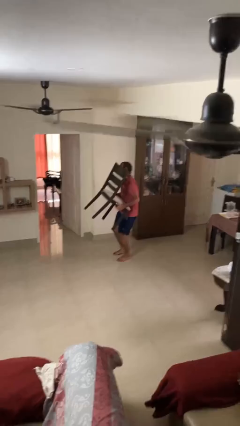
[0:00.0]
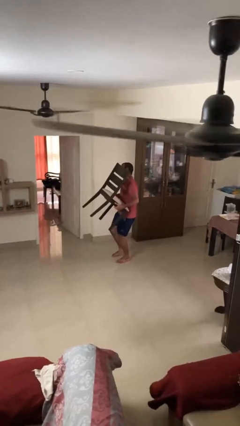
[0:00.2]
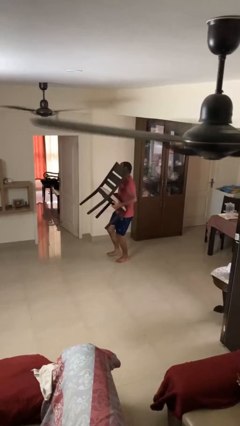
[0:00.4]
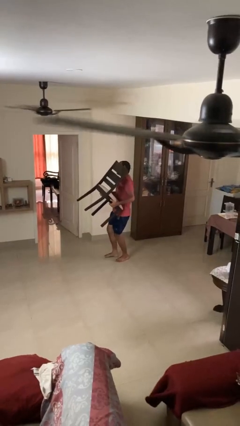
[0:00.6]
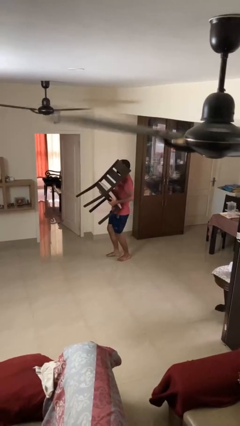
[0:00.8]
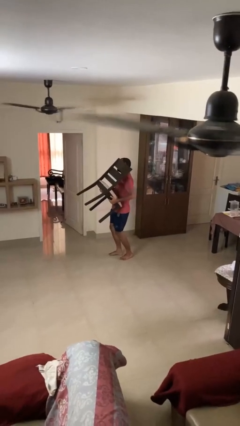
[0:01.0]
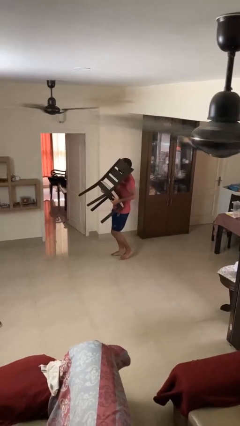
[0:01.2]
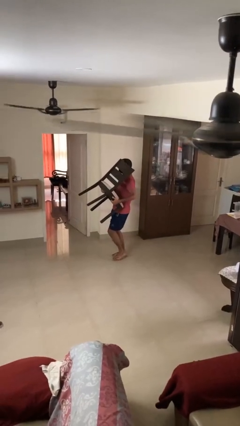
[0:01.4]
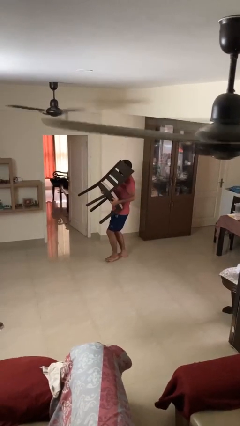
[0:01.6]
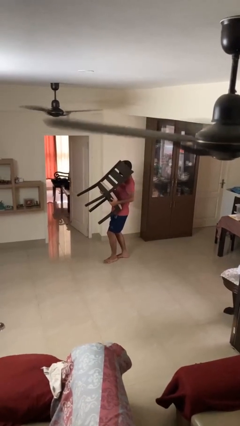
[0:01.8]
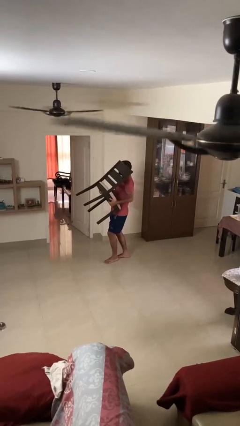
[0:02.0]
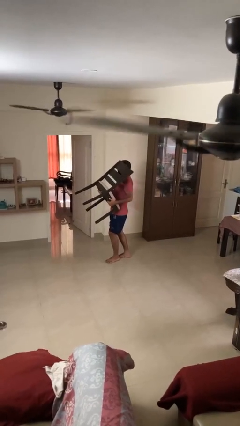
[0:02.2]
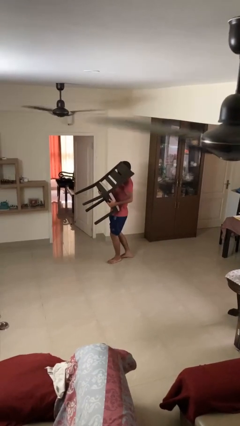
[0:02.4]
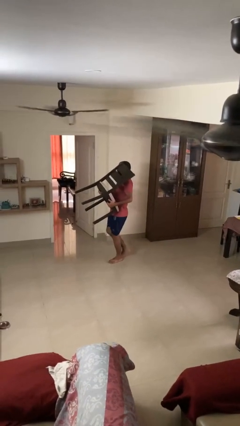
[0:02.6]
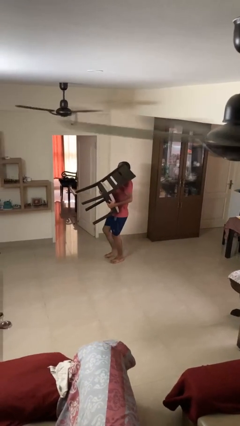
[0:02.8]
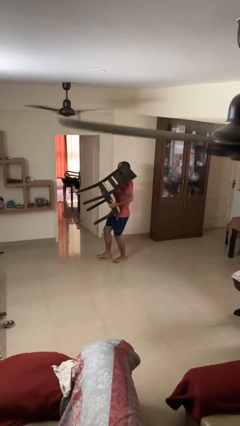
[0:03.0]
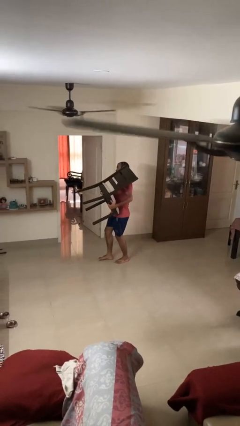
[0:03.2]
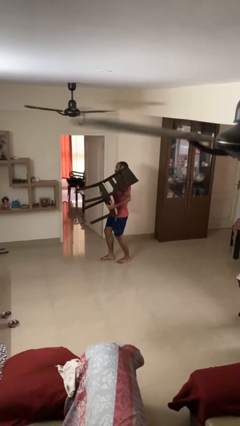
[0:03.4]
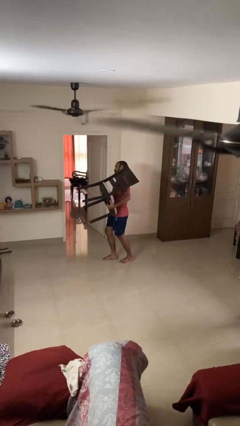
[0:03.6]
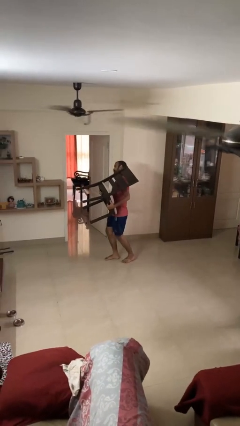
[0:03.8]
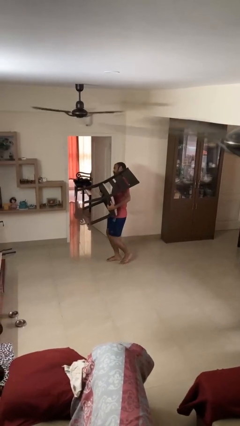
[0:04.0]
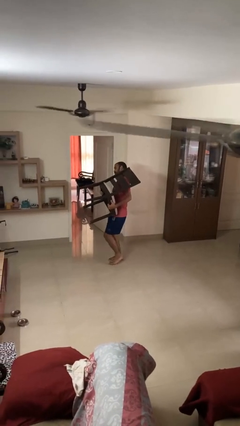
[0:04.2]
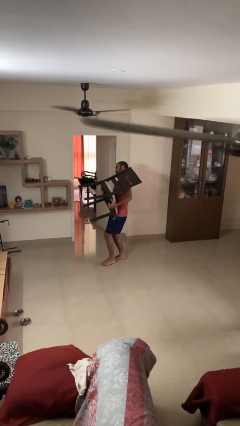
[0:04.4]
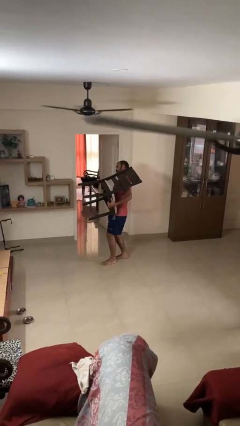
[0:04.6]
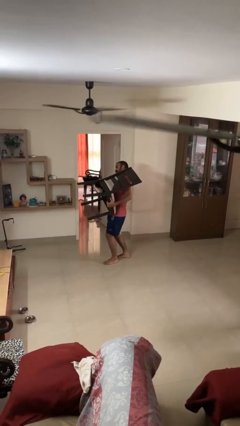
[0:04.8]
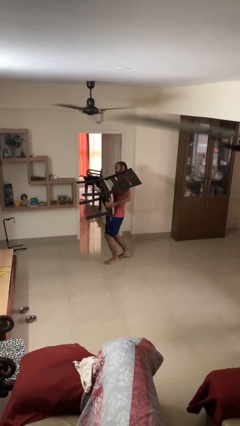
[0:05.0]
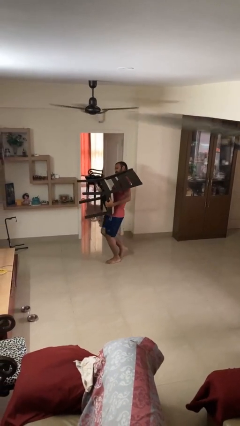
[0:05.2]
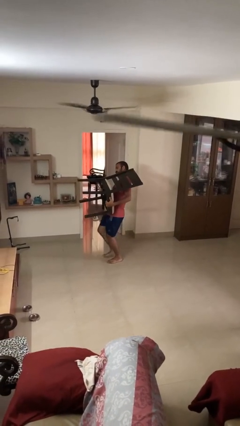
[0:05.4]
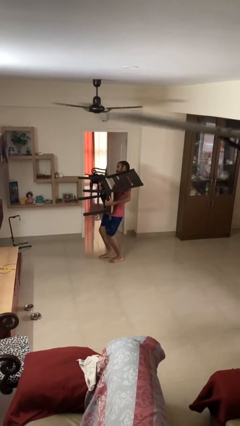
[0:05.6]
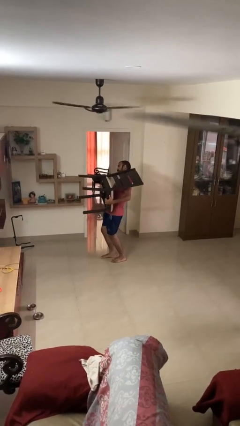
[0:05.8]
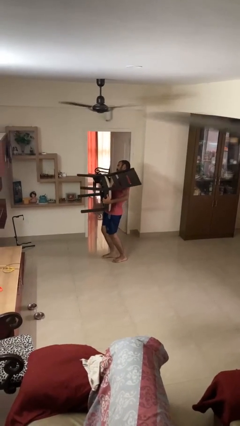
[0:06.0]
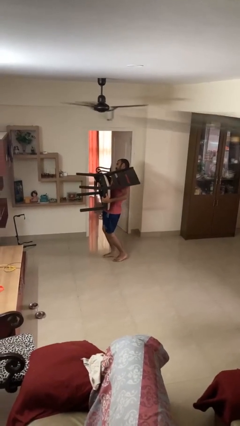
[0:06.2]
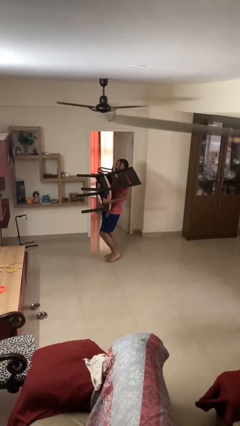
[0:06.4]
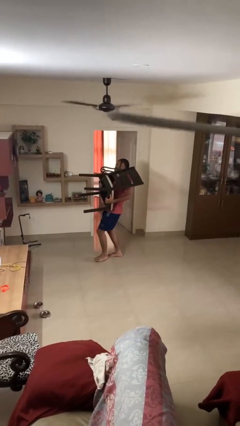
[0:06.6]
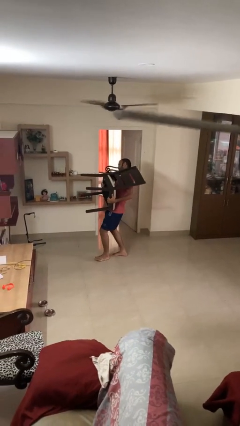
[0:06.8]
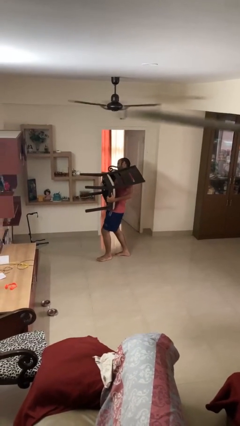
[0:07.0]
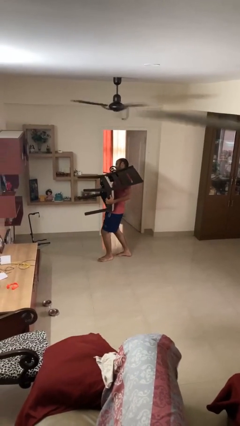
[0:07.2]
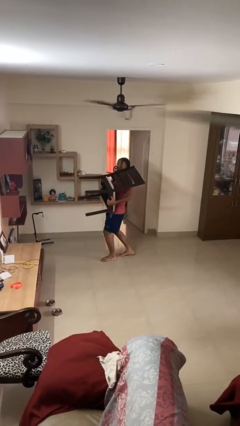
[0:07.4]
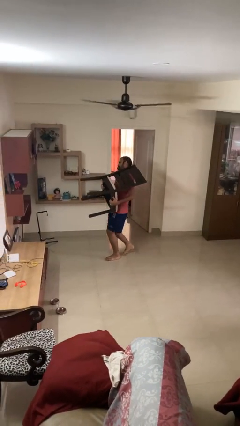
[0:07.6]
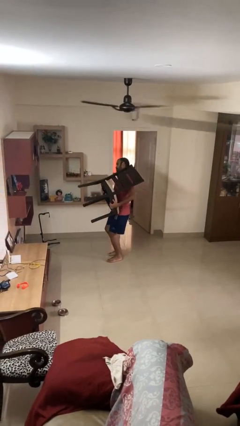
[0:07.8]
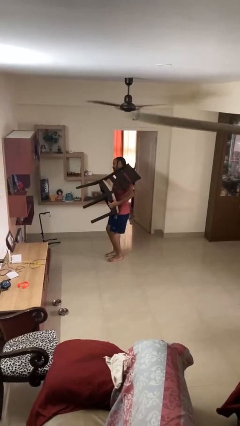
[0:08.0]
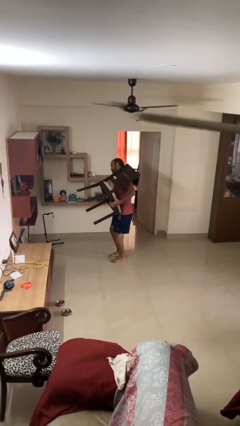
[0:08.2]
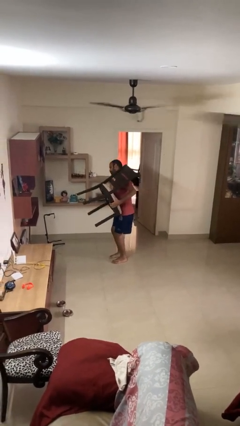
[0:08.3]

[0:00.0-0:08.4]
person carries heavy object

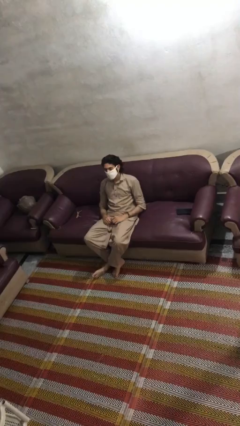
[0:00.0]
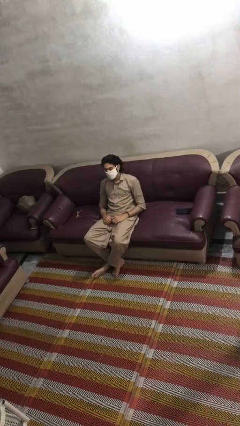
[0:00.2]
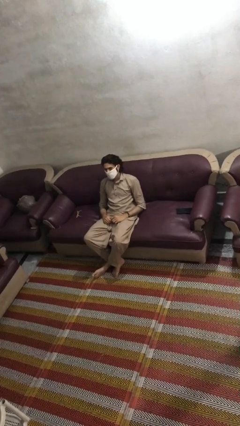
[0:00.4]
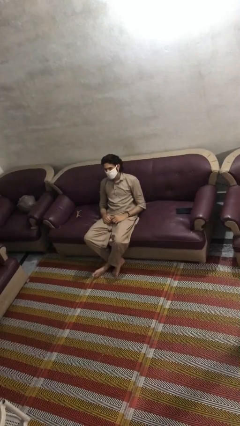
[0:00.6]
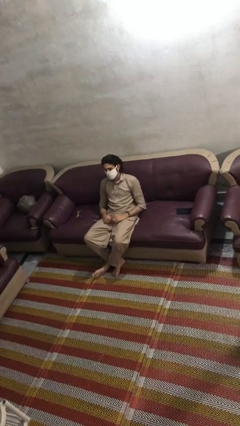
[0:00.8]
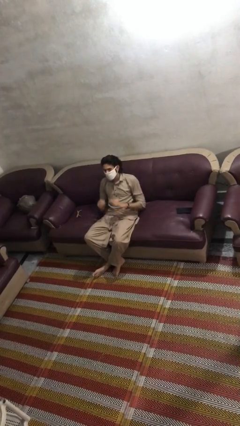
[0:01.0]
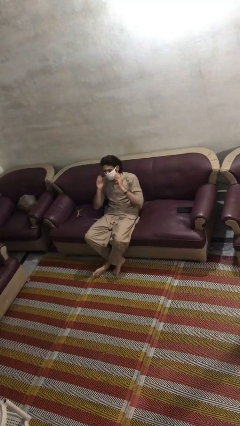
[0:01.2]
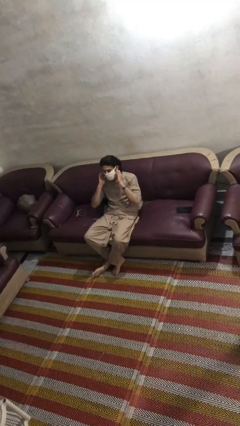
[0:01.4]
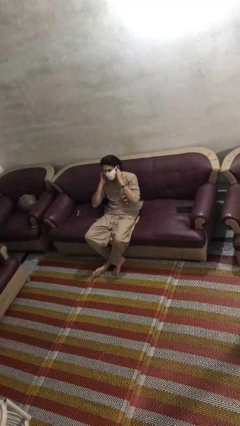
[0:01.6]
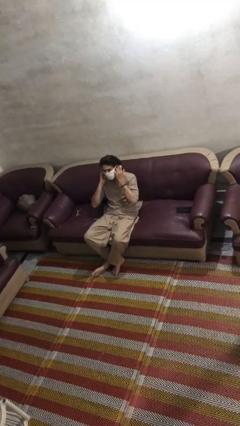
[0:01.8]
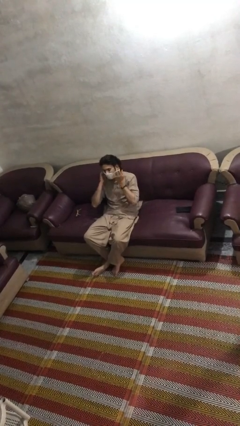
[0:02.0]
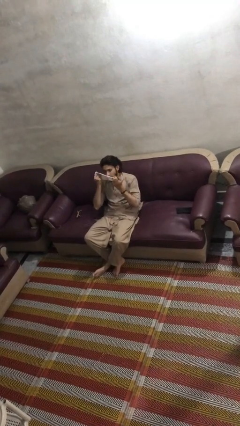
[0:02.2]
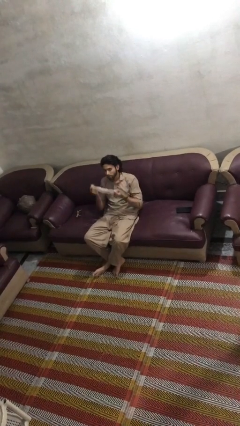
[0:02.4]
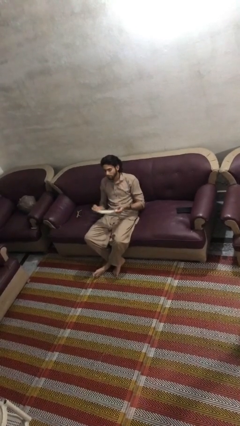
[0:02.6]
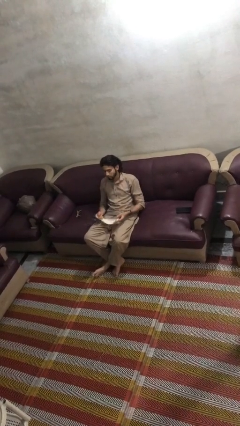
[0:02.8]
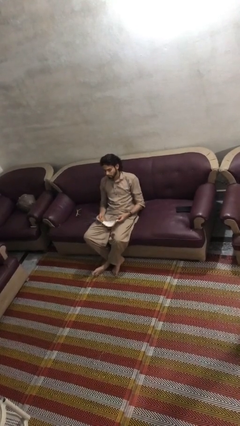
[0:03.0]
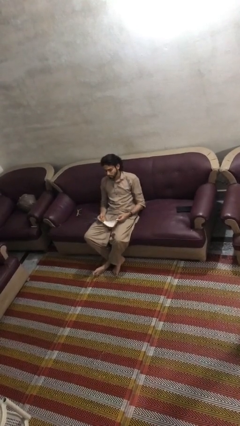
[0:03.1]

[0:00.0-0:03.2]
person takes off facemask

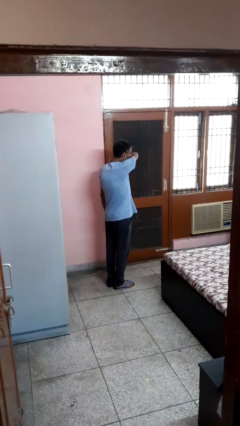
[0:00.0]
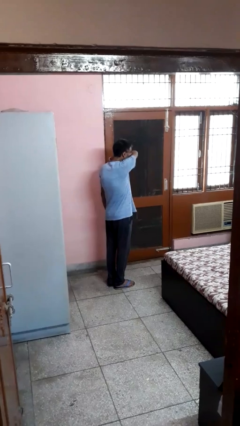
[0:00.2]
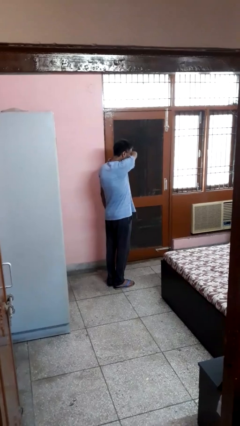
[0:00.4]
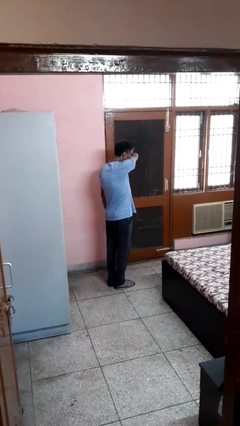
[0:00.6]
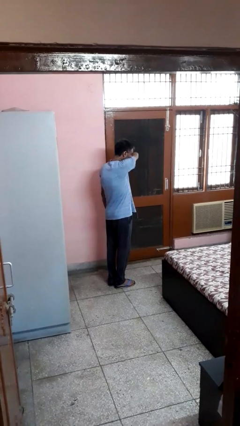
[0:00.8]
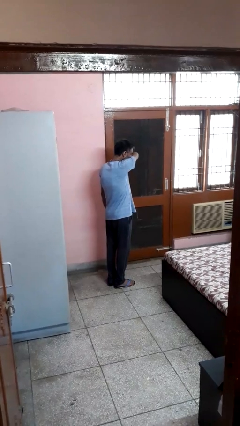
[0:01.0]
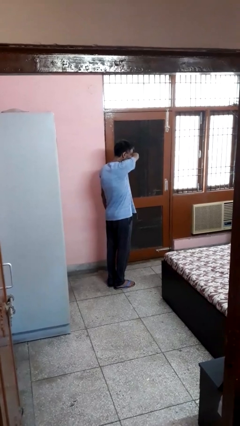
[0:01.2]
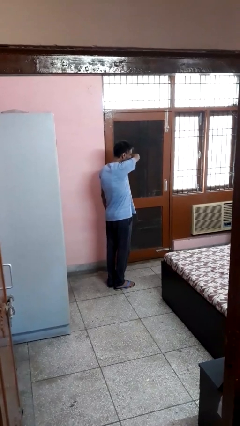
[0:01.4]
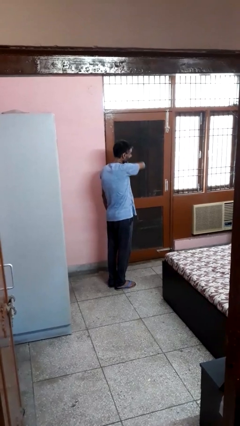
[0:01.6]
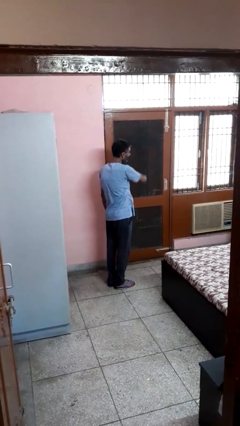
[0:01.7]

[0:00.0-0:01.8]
person sneezes into arm

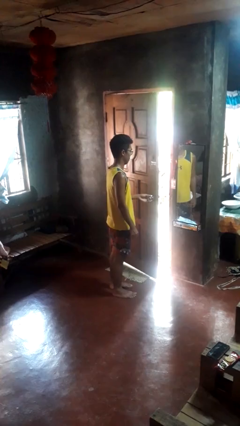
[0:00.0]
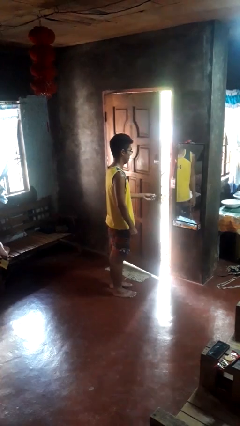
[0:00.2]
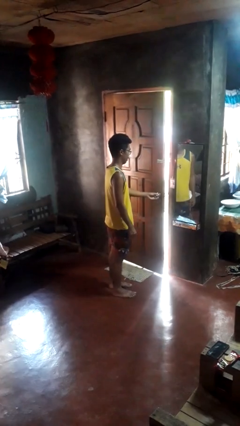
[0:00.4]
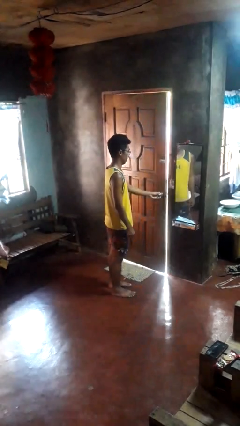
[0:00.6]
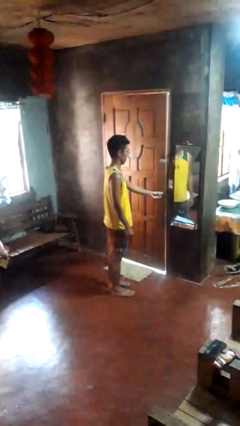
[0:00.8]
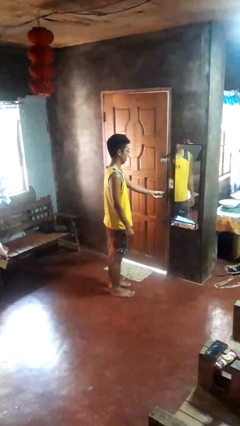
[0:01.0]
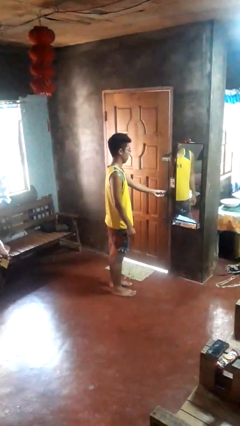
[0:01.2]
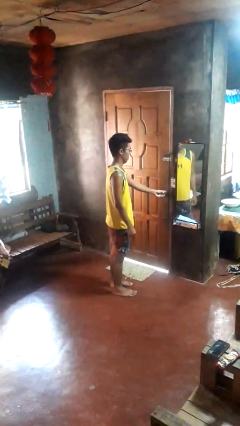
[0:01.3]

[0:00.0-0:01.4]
person closes facility door

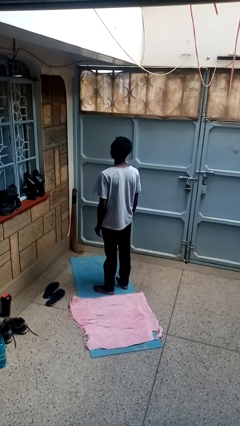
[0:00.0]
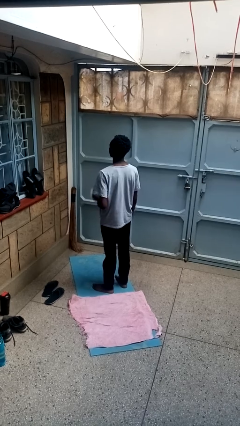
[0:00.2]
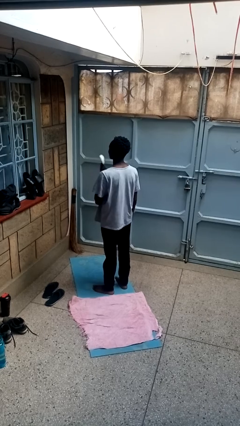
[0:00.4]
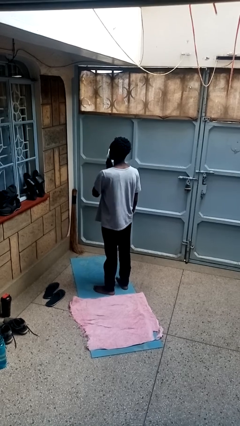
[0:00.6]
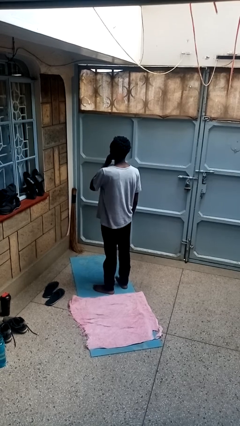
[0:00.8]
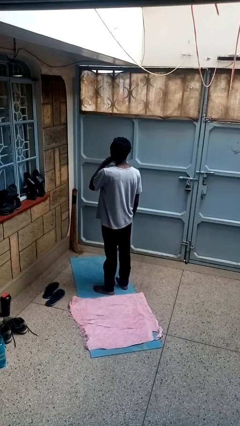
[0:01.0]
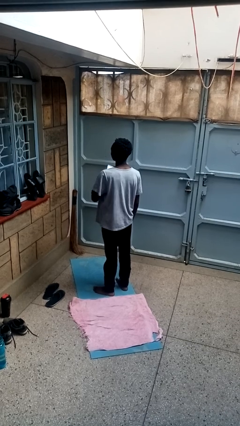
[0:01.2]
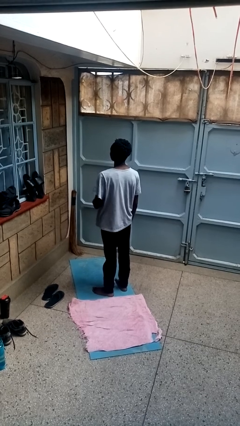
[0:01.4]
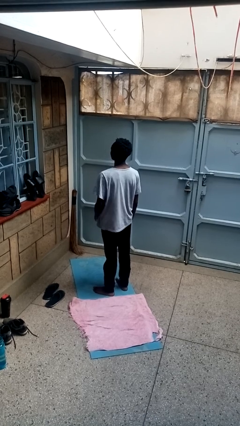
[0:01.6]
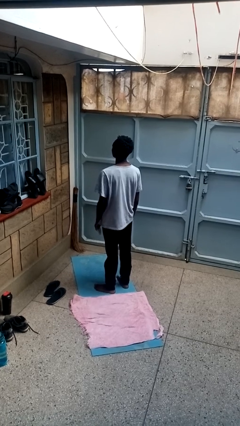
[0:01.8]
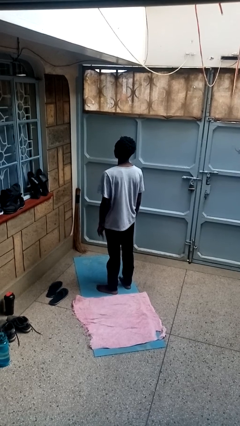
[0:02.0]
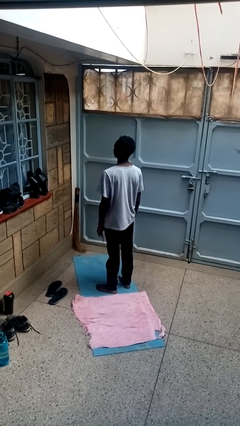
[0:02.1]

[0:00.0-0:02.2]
person wipes mouth with napkin

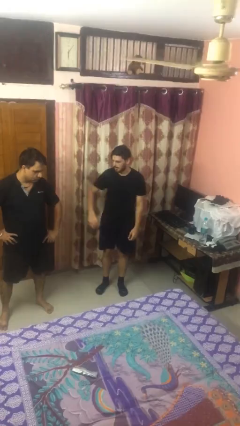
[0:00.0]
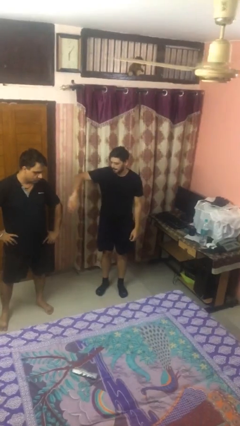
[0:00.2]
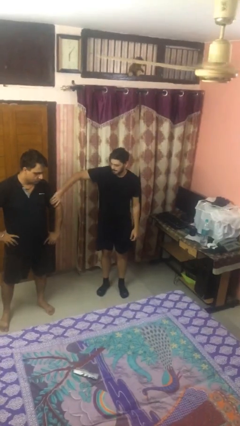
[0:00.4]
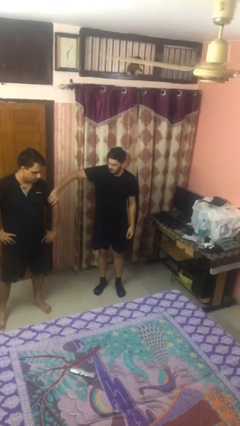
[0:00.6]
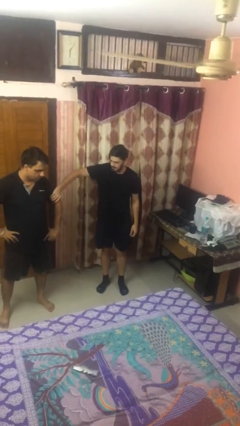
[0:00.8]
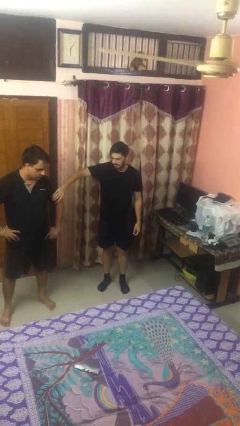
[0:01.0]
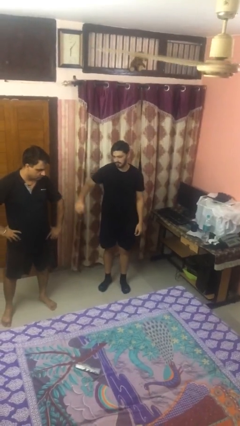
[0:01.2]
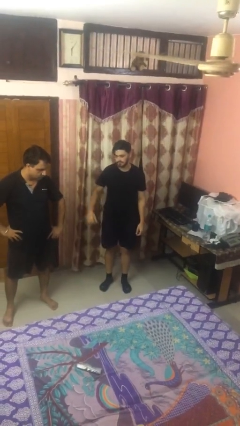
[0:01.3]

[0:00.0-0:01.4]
person grabs person by bicep
